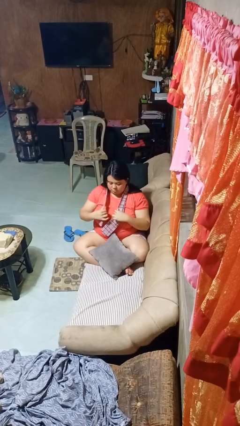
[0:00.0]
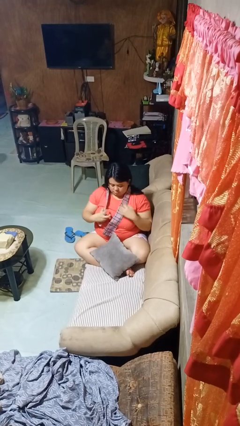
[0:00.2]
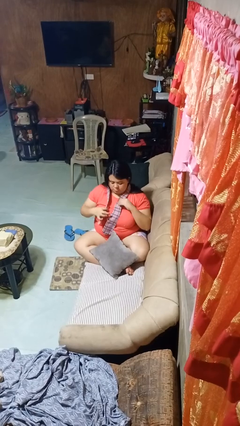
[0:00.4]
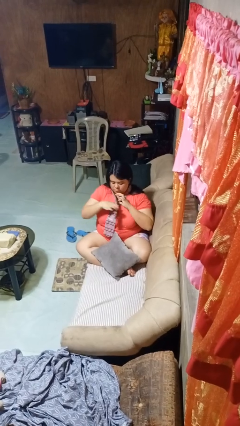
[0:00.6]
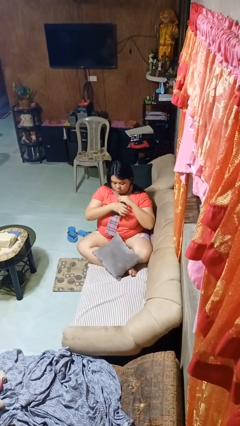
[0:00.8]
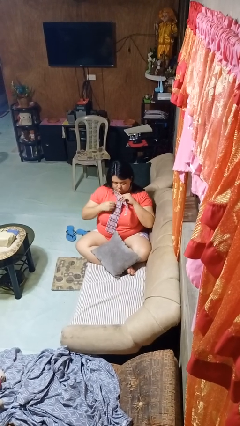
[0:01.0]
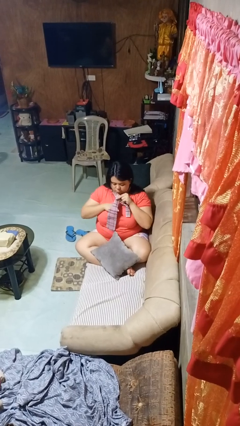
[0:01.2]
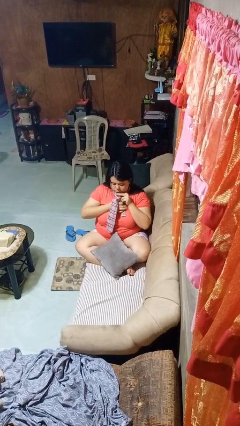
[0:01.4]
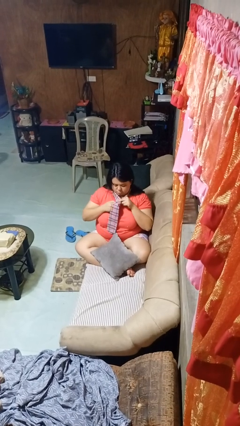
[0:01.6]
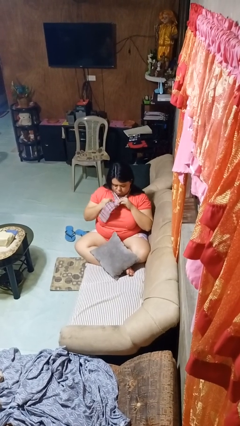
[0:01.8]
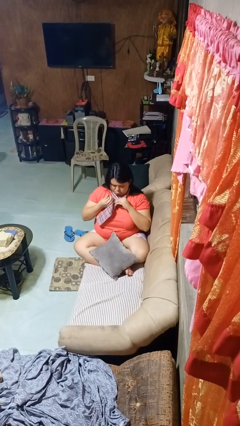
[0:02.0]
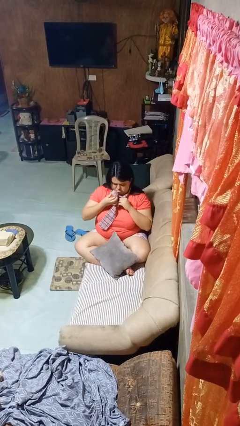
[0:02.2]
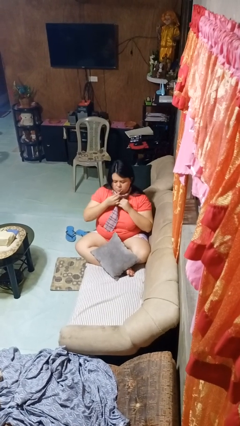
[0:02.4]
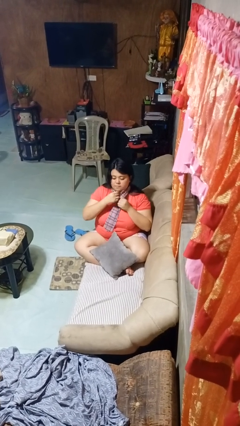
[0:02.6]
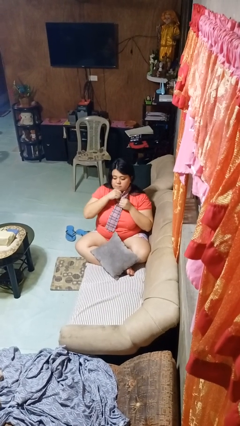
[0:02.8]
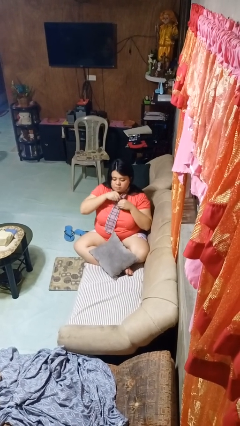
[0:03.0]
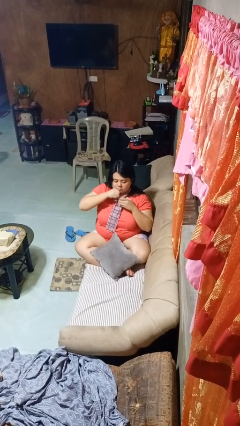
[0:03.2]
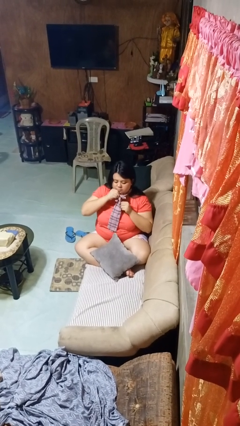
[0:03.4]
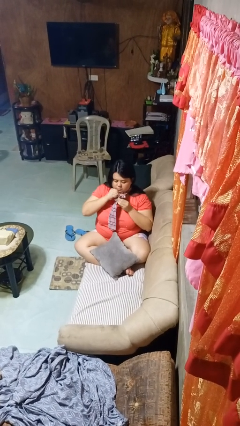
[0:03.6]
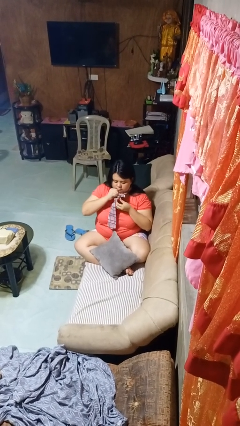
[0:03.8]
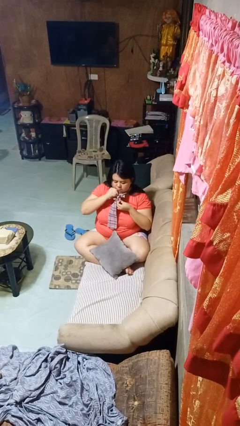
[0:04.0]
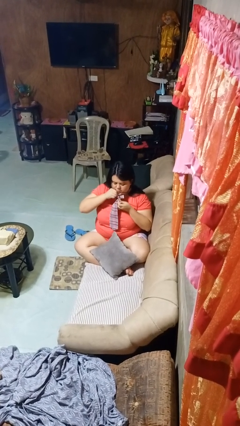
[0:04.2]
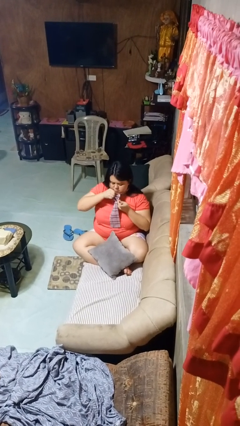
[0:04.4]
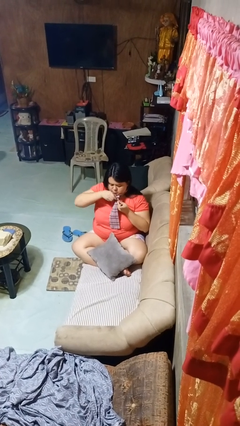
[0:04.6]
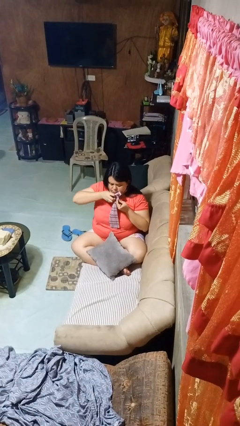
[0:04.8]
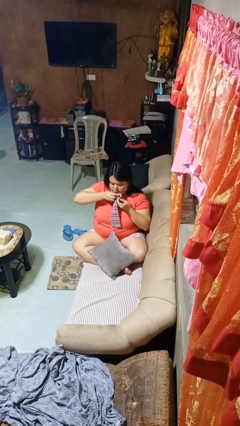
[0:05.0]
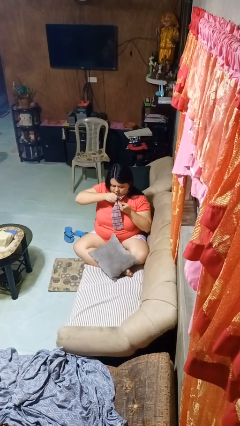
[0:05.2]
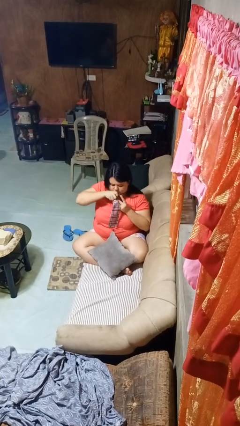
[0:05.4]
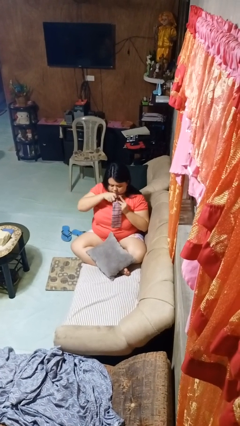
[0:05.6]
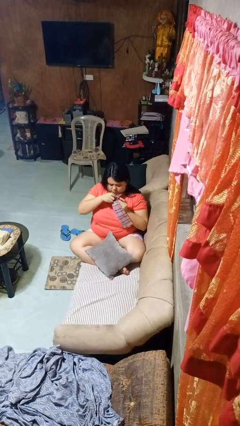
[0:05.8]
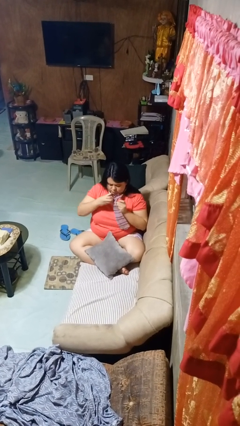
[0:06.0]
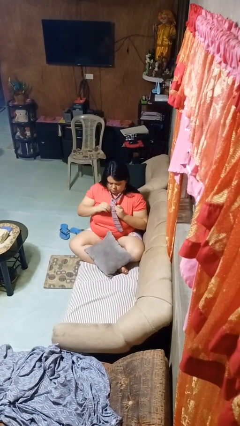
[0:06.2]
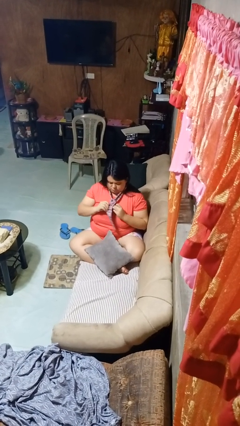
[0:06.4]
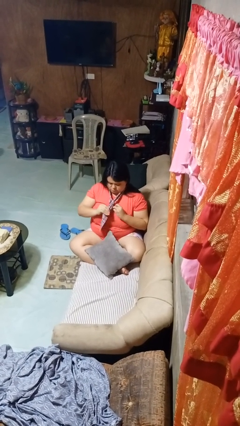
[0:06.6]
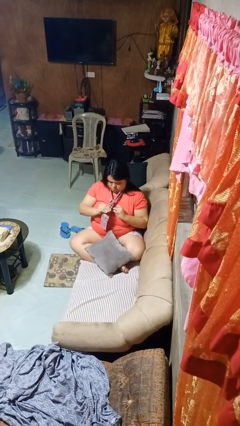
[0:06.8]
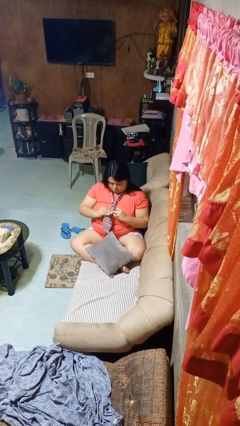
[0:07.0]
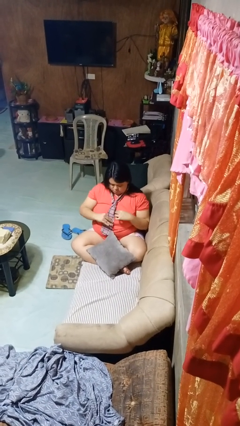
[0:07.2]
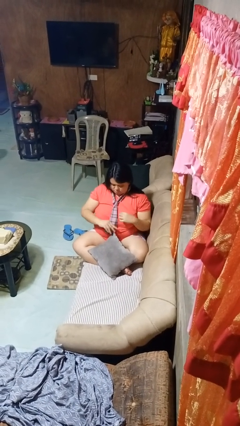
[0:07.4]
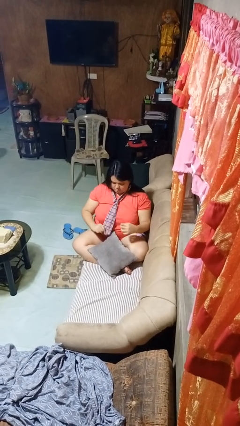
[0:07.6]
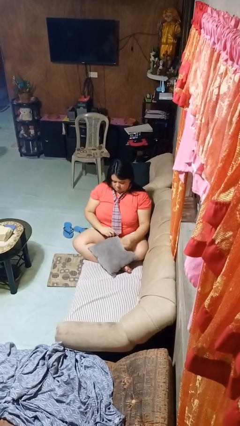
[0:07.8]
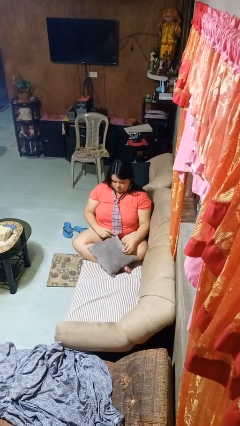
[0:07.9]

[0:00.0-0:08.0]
person puts on necktie

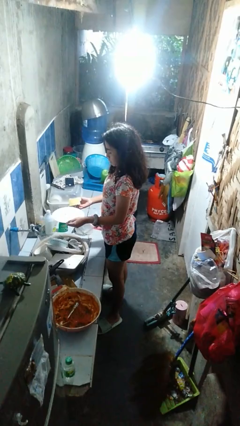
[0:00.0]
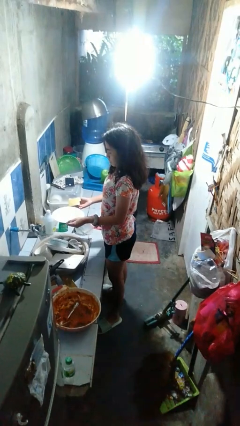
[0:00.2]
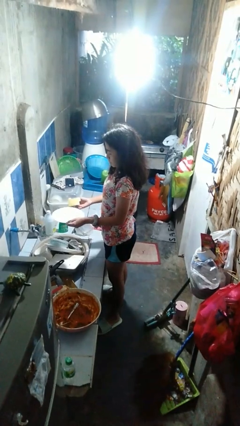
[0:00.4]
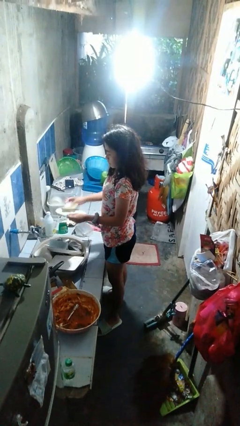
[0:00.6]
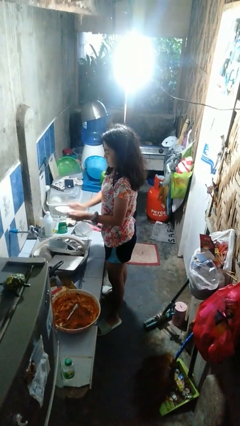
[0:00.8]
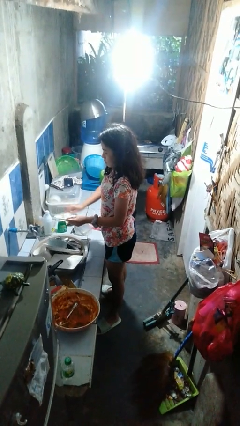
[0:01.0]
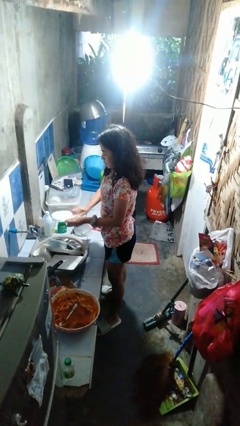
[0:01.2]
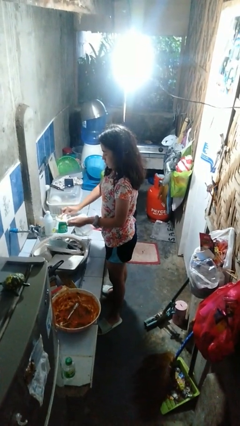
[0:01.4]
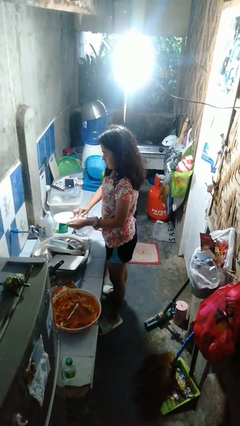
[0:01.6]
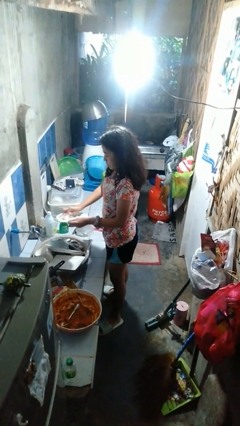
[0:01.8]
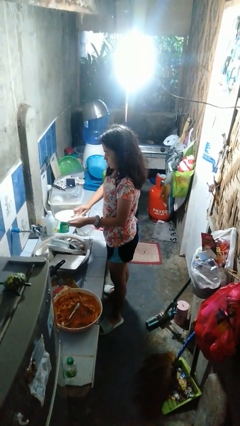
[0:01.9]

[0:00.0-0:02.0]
person washes dish

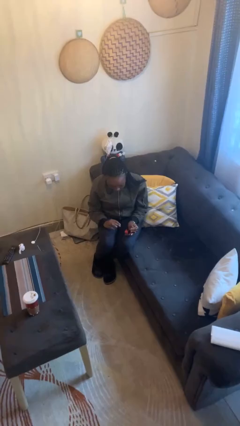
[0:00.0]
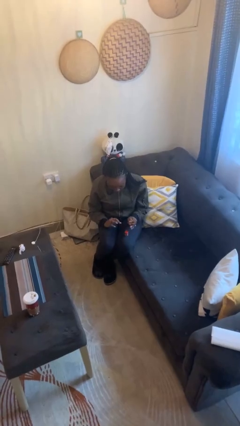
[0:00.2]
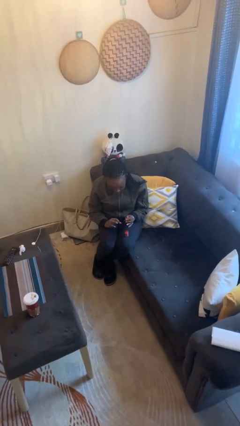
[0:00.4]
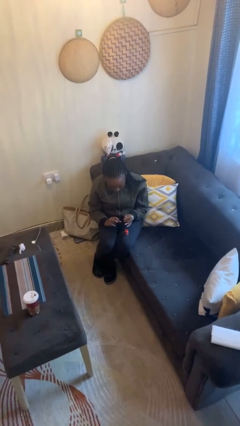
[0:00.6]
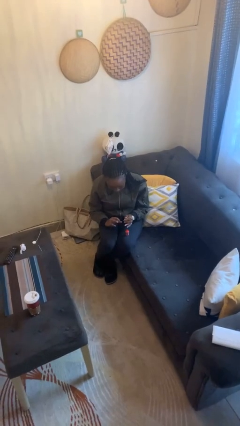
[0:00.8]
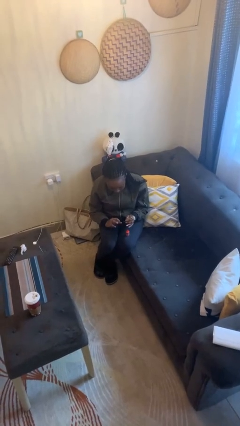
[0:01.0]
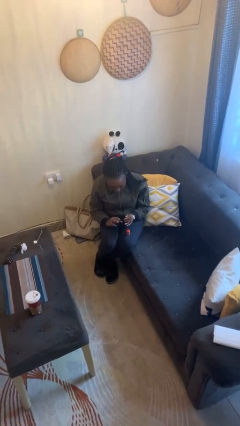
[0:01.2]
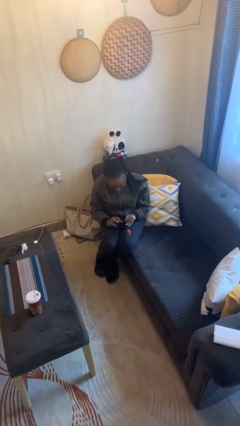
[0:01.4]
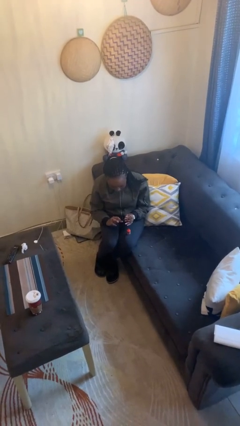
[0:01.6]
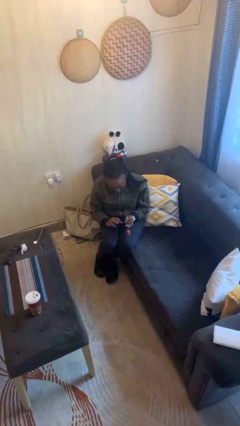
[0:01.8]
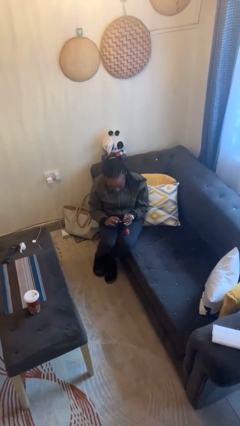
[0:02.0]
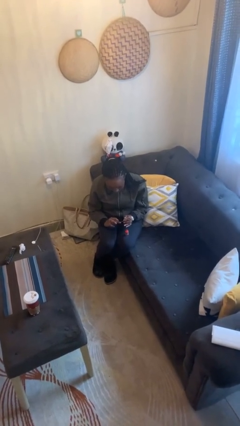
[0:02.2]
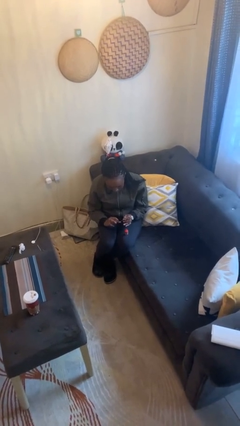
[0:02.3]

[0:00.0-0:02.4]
person paints fingernails

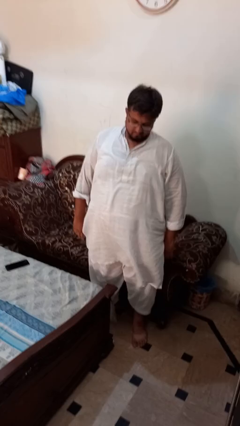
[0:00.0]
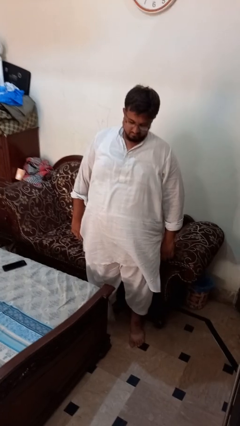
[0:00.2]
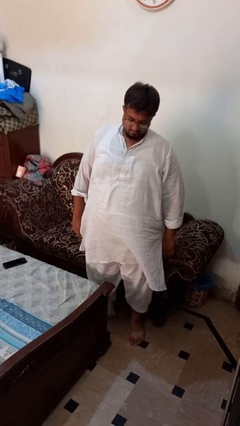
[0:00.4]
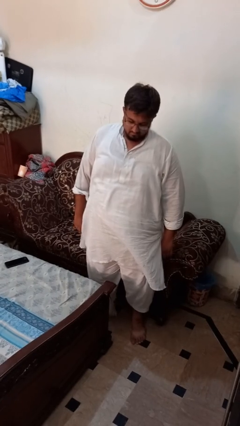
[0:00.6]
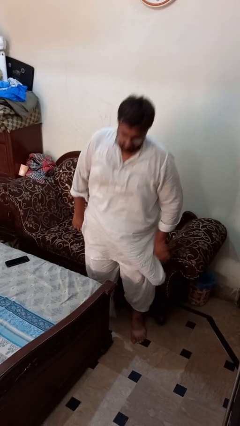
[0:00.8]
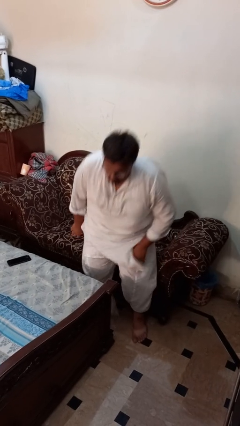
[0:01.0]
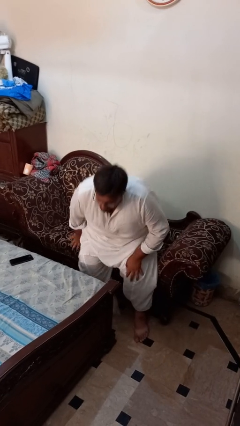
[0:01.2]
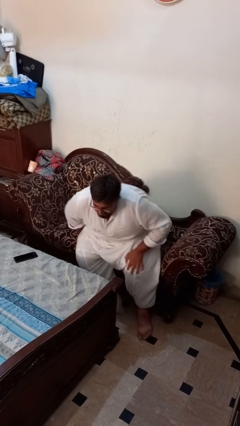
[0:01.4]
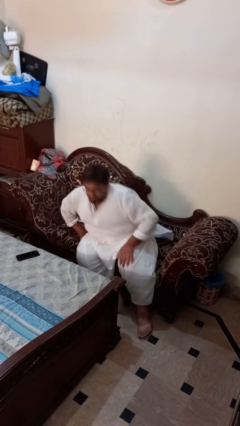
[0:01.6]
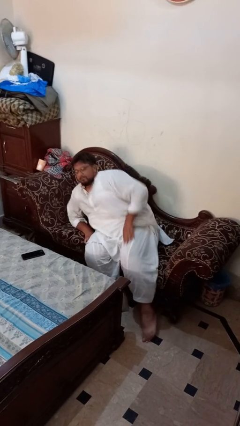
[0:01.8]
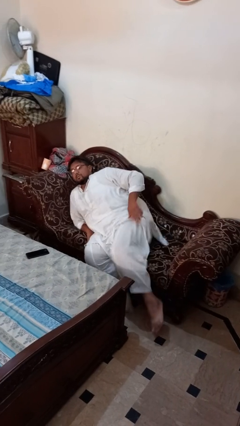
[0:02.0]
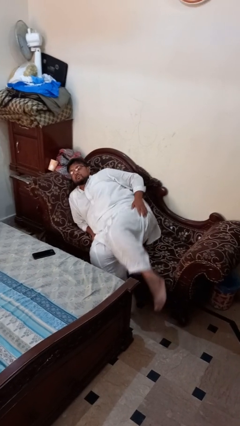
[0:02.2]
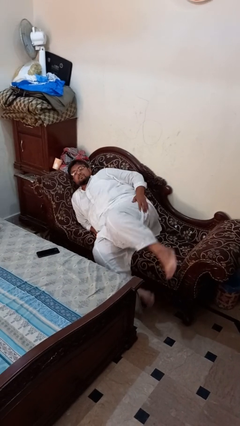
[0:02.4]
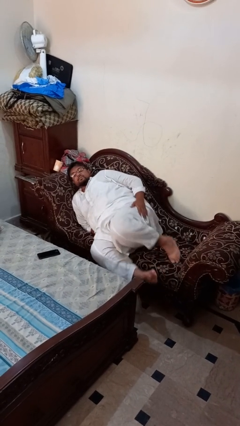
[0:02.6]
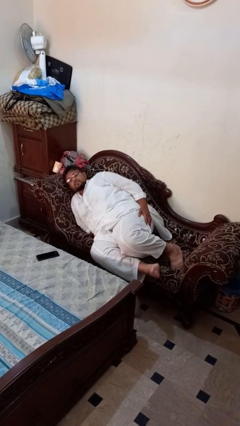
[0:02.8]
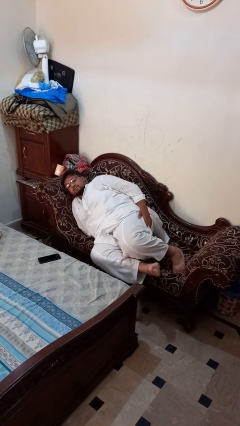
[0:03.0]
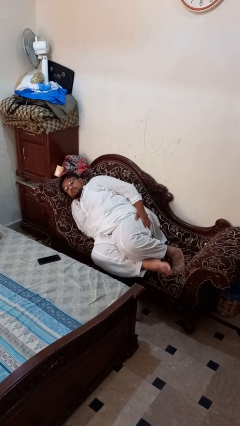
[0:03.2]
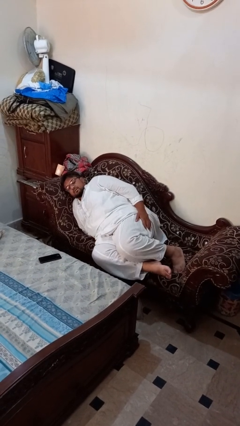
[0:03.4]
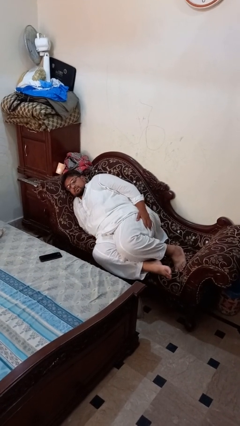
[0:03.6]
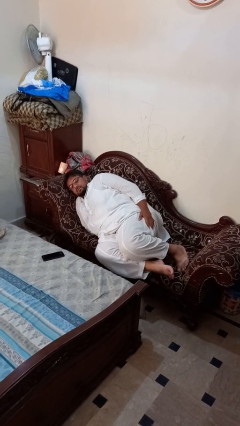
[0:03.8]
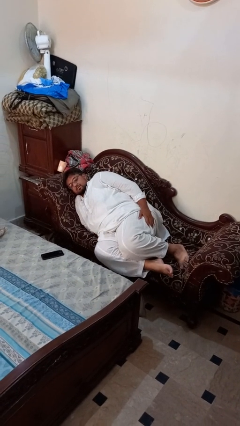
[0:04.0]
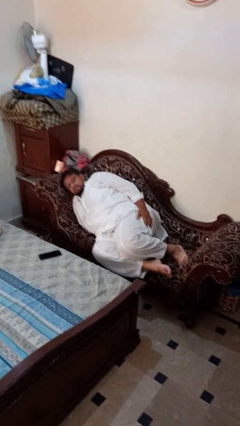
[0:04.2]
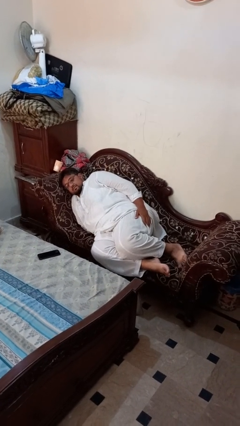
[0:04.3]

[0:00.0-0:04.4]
person lies down on couch

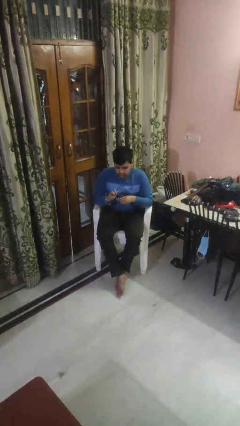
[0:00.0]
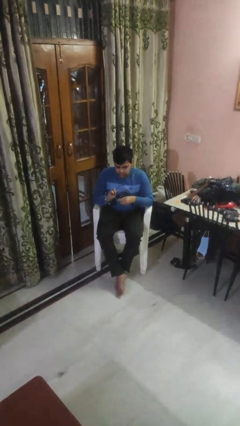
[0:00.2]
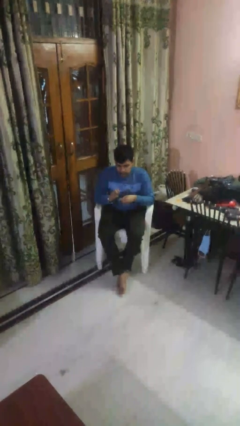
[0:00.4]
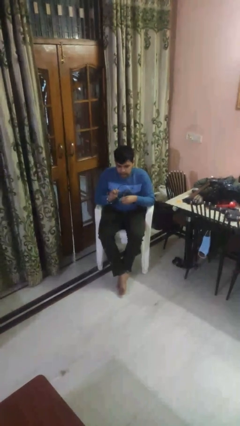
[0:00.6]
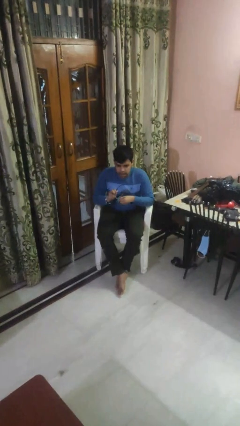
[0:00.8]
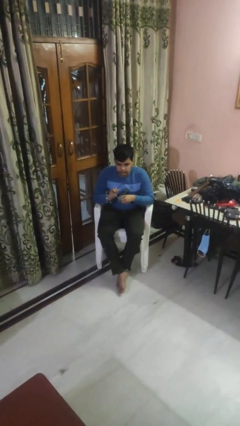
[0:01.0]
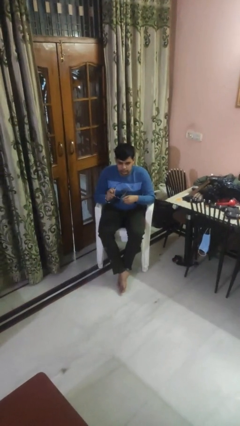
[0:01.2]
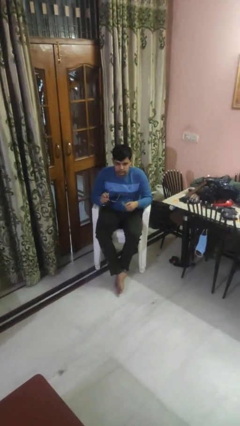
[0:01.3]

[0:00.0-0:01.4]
person cleans eyeglasses
